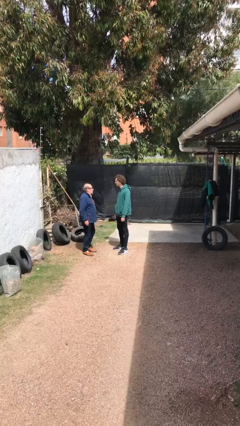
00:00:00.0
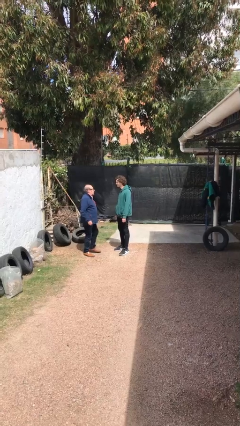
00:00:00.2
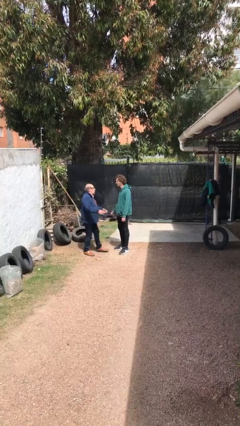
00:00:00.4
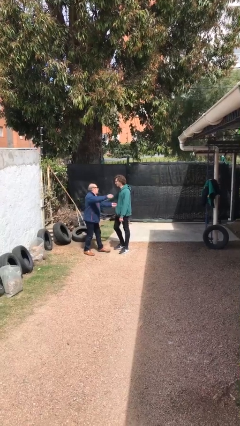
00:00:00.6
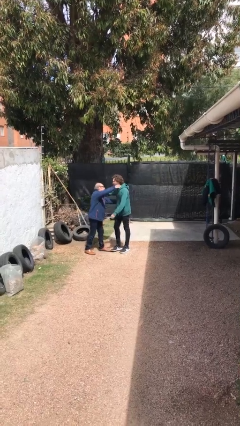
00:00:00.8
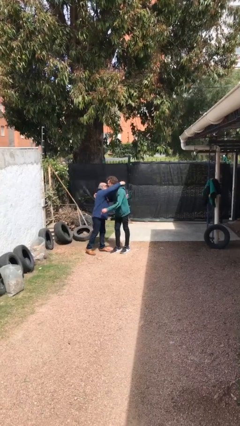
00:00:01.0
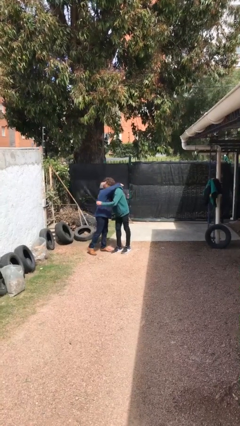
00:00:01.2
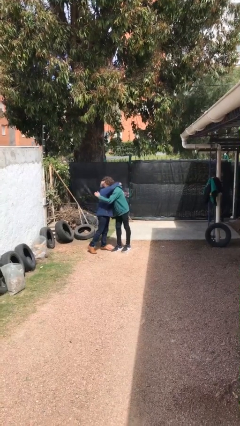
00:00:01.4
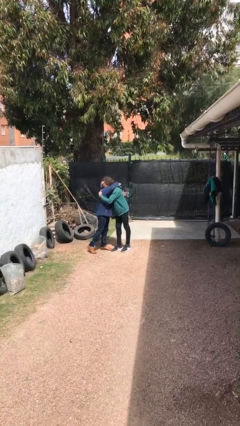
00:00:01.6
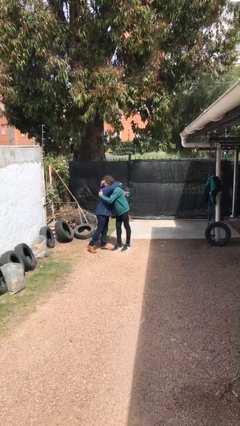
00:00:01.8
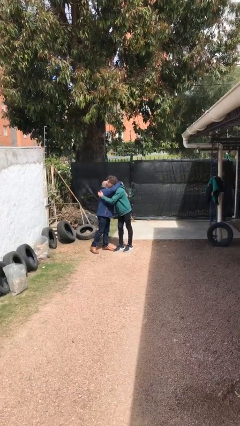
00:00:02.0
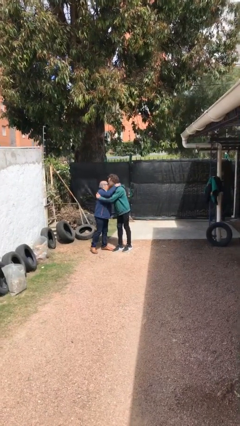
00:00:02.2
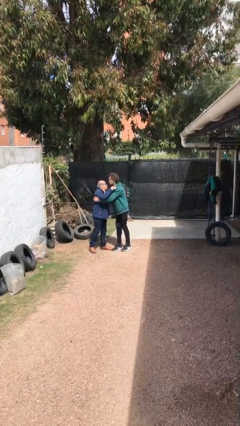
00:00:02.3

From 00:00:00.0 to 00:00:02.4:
person embraces person

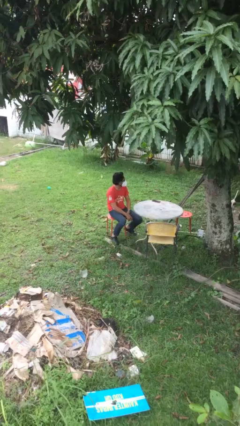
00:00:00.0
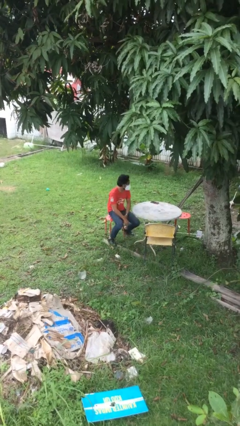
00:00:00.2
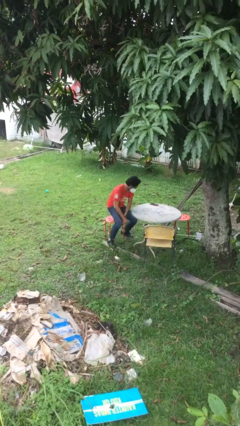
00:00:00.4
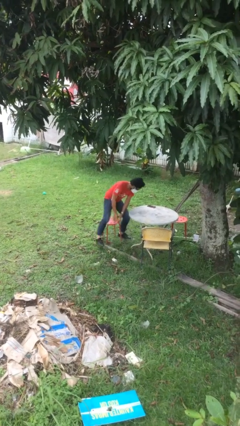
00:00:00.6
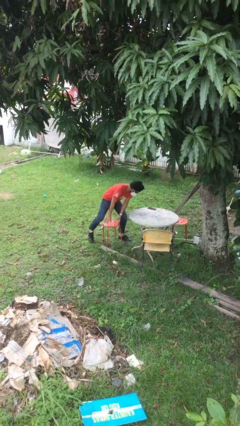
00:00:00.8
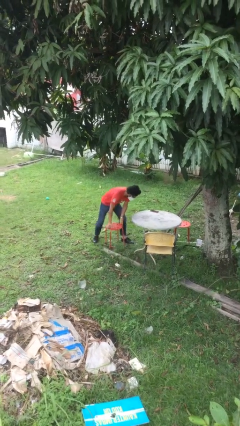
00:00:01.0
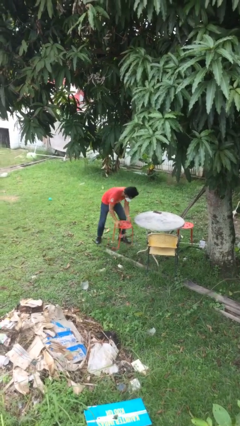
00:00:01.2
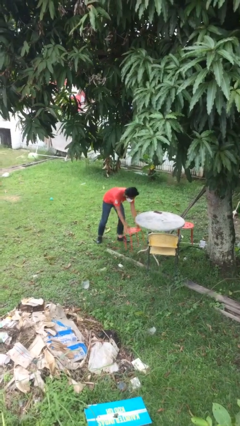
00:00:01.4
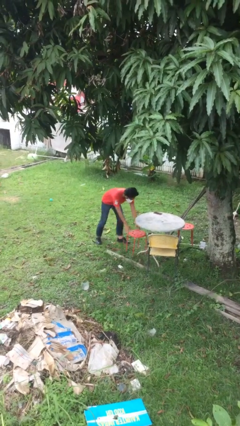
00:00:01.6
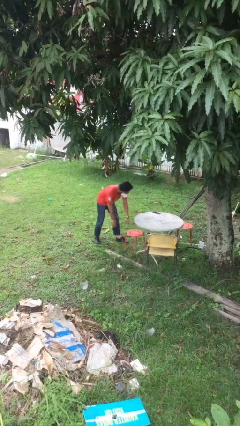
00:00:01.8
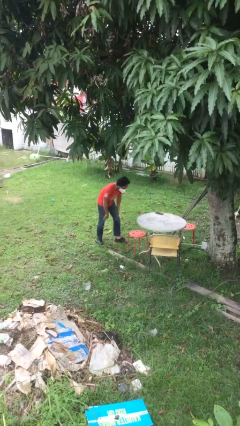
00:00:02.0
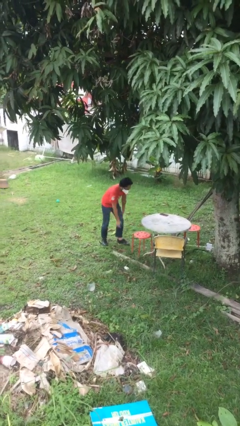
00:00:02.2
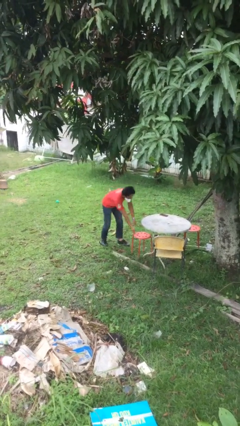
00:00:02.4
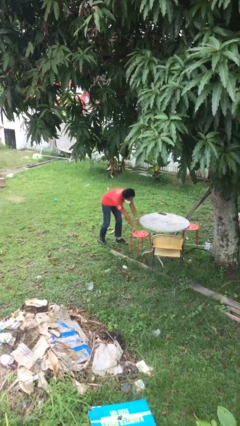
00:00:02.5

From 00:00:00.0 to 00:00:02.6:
person stands up

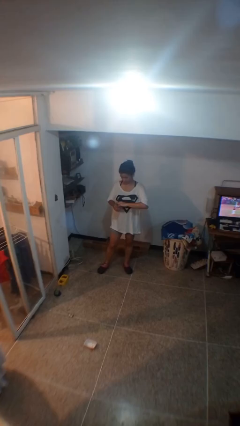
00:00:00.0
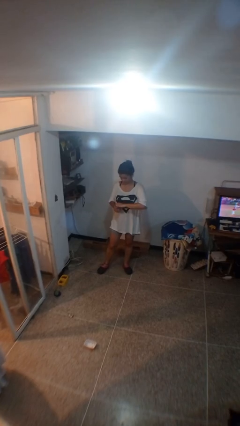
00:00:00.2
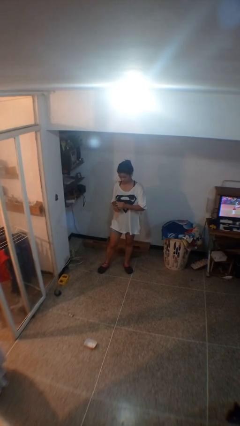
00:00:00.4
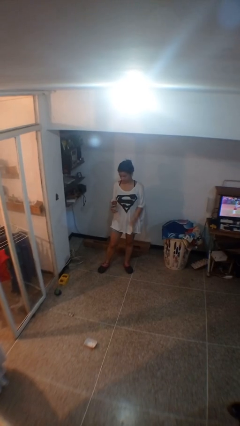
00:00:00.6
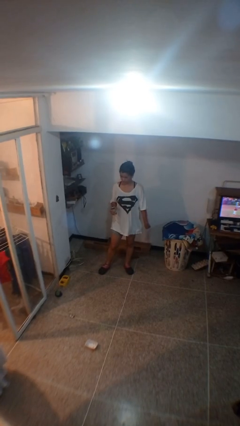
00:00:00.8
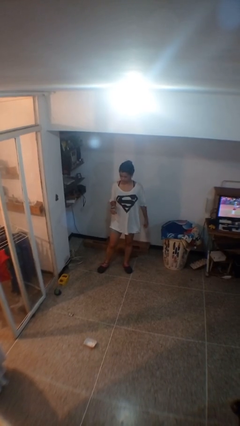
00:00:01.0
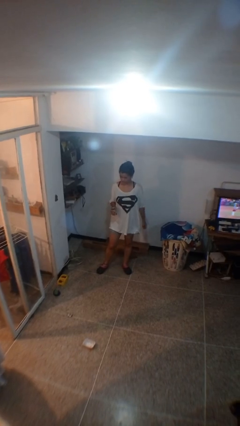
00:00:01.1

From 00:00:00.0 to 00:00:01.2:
person opens beverage can

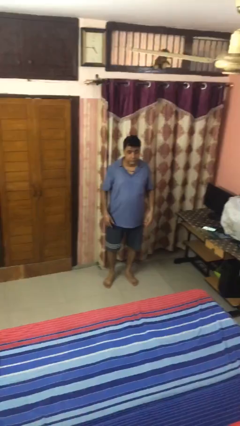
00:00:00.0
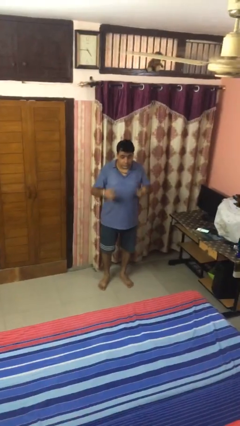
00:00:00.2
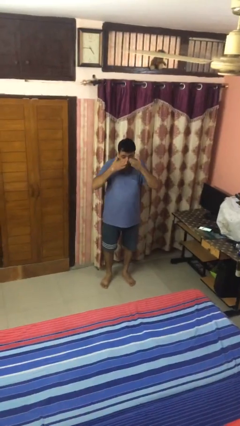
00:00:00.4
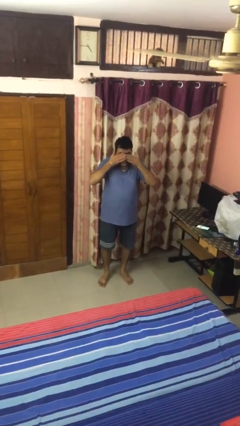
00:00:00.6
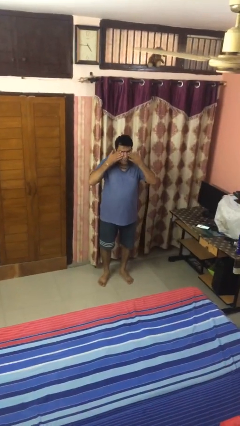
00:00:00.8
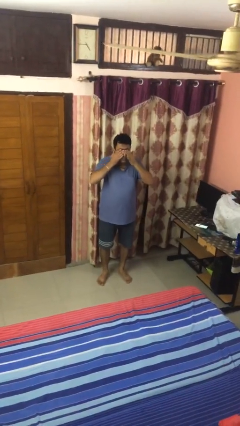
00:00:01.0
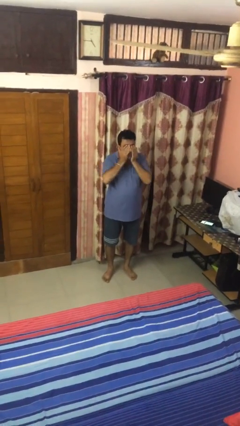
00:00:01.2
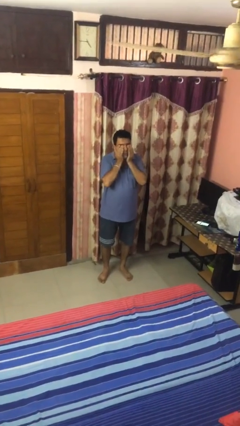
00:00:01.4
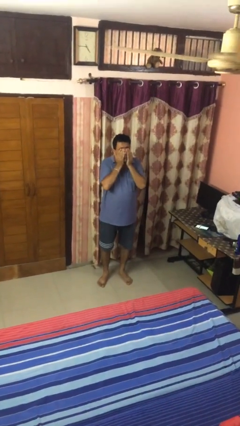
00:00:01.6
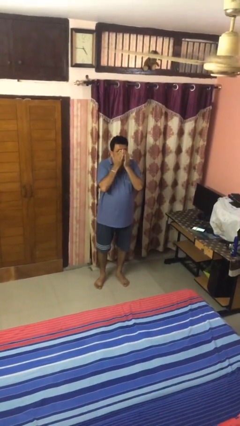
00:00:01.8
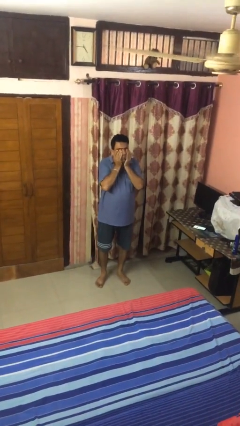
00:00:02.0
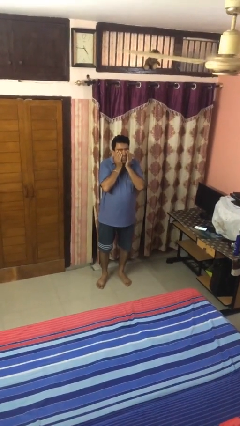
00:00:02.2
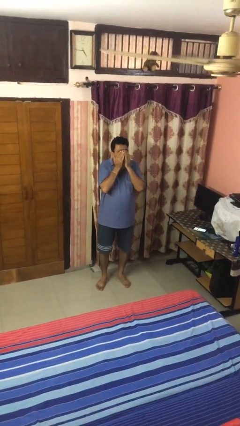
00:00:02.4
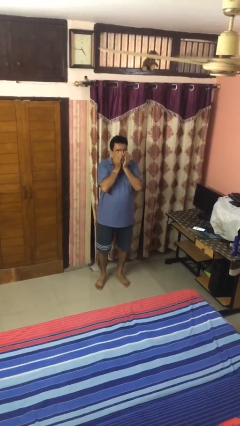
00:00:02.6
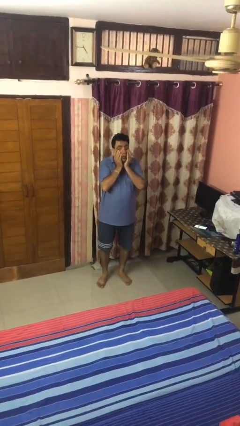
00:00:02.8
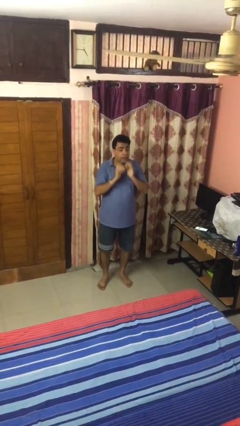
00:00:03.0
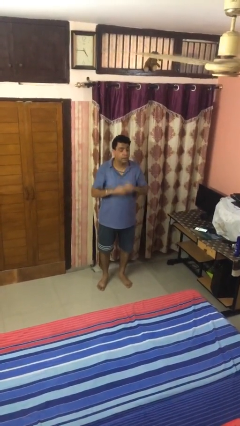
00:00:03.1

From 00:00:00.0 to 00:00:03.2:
person rubs eyes

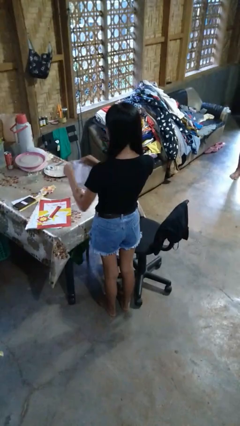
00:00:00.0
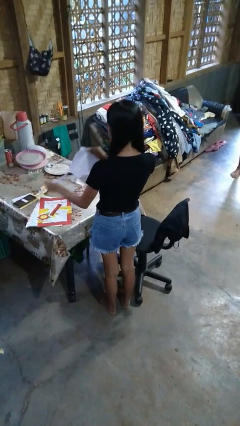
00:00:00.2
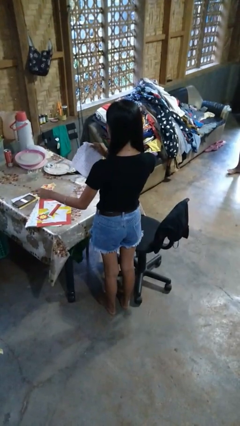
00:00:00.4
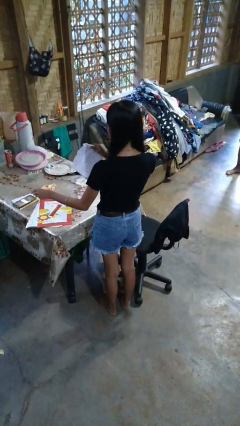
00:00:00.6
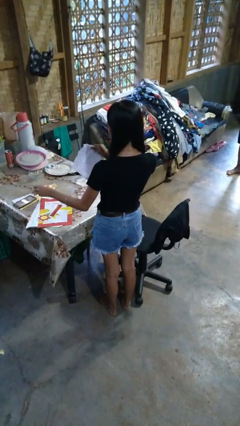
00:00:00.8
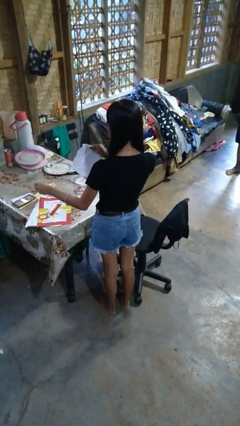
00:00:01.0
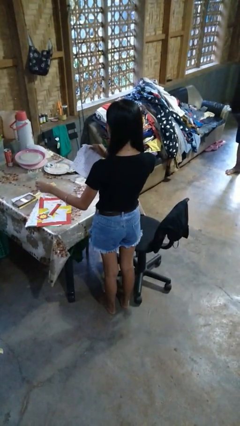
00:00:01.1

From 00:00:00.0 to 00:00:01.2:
person tears paper

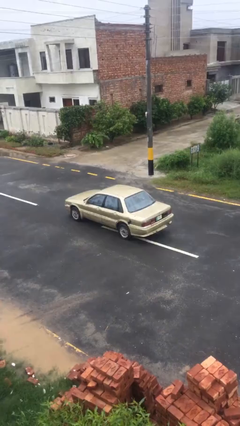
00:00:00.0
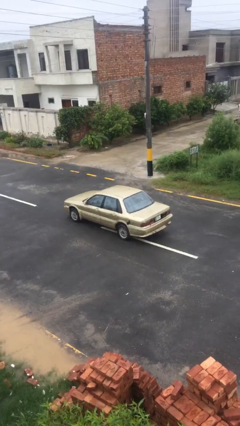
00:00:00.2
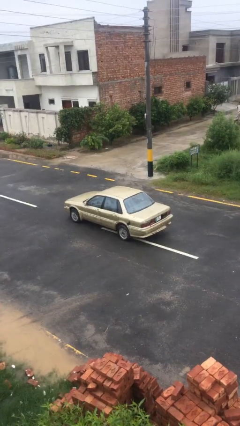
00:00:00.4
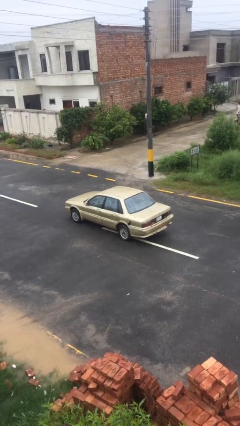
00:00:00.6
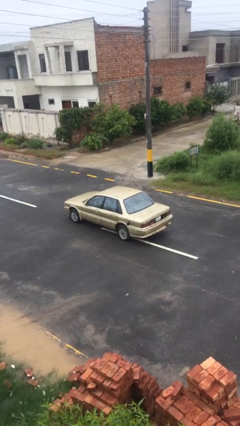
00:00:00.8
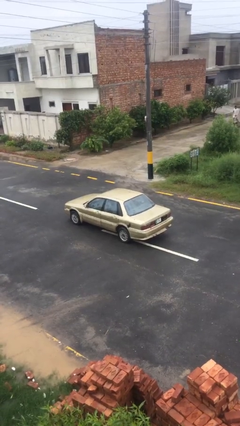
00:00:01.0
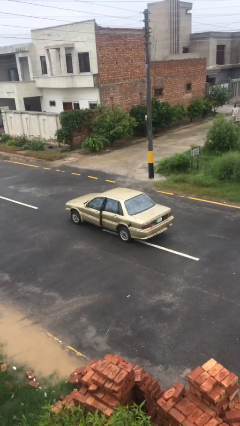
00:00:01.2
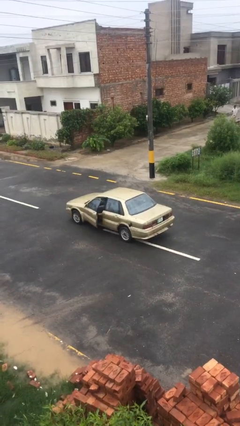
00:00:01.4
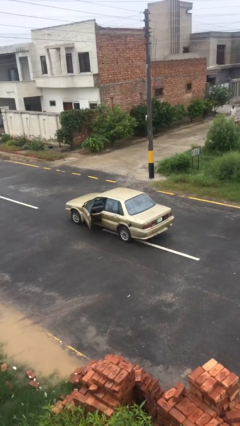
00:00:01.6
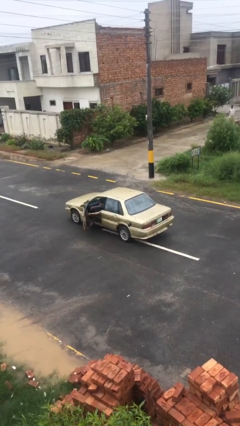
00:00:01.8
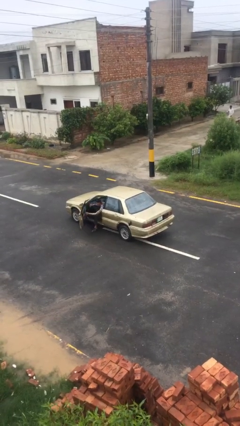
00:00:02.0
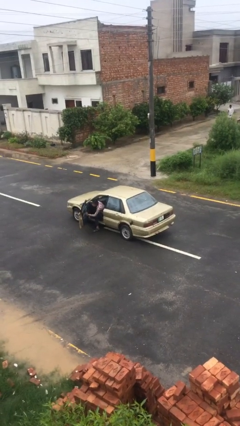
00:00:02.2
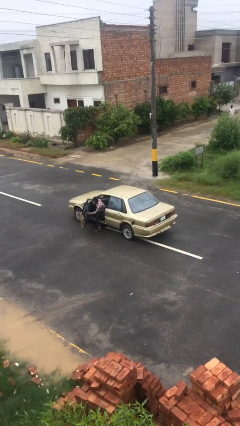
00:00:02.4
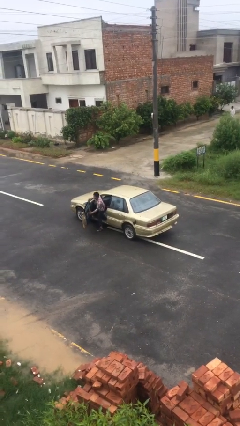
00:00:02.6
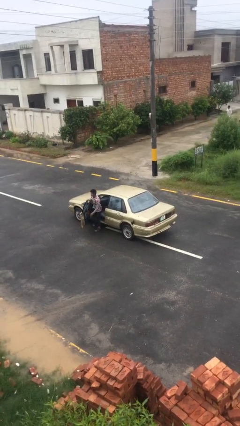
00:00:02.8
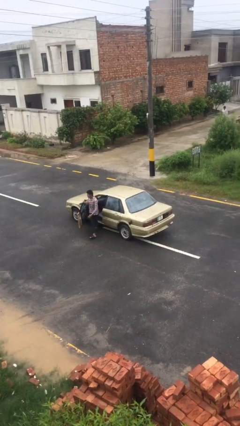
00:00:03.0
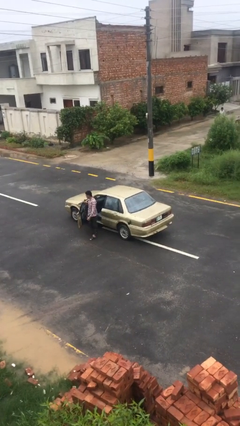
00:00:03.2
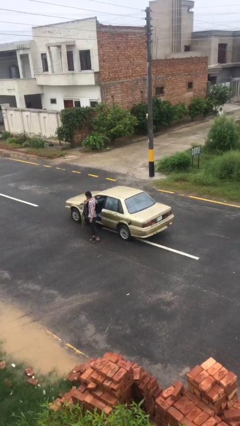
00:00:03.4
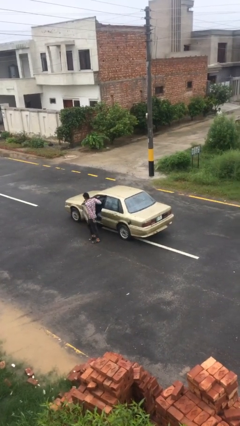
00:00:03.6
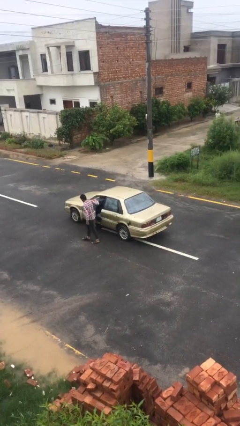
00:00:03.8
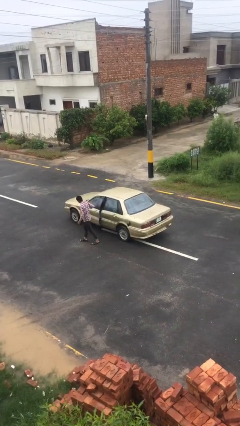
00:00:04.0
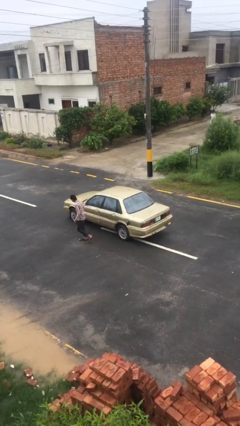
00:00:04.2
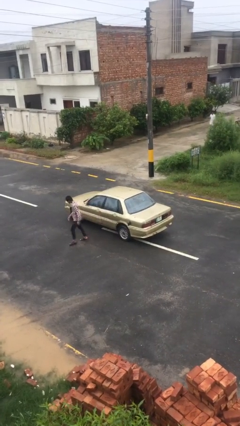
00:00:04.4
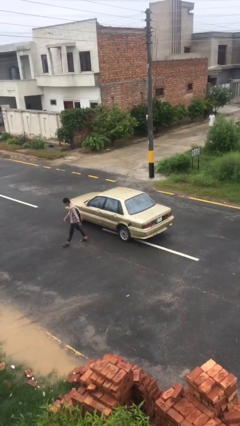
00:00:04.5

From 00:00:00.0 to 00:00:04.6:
car drops off person

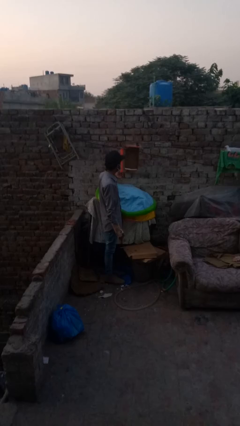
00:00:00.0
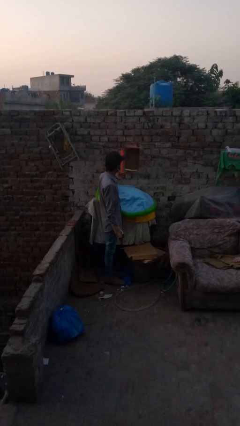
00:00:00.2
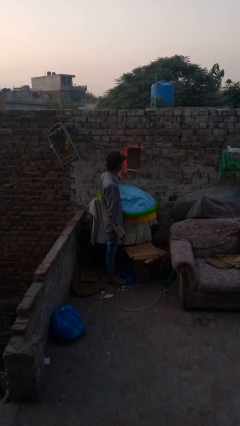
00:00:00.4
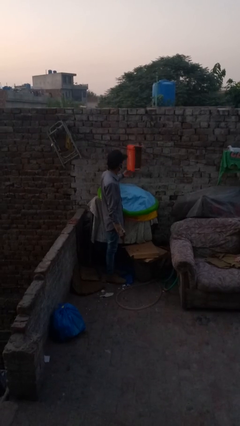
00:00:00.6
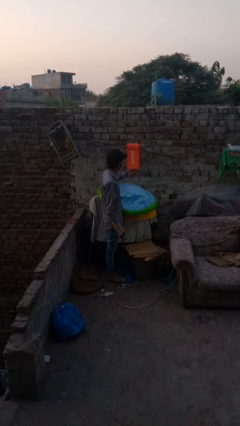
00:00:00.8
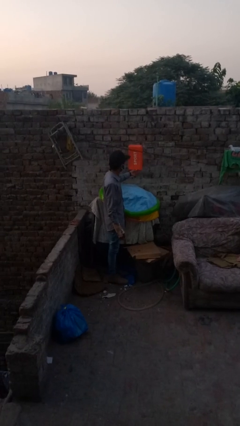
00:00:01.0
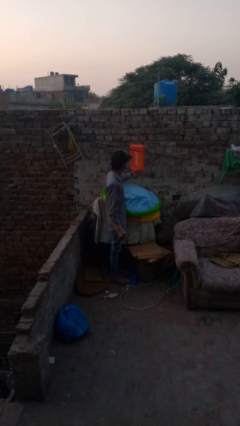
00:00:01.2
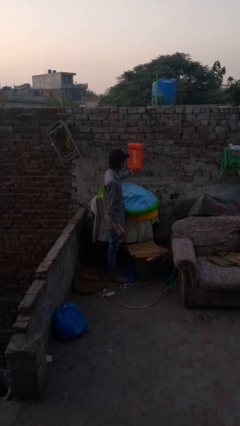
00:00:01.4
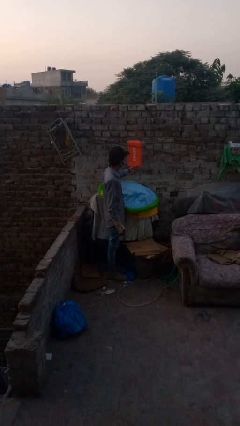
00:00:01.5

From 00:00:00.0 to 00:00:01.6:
person closes mailbox

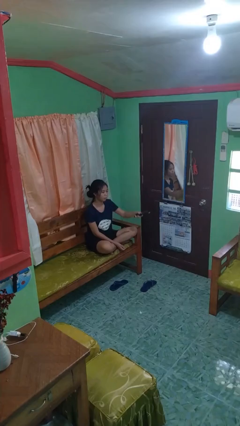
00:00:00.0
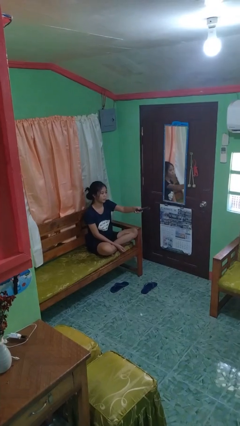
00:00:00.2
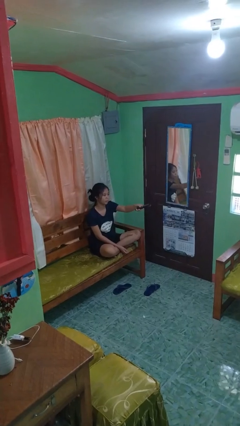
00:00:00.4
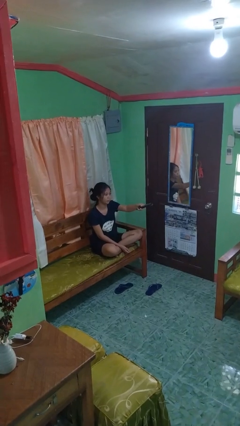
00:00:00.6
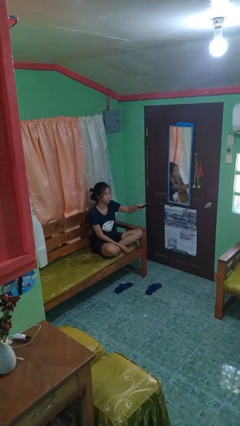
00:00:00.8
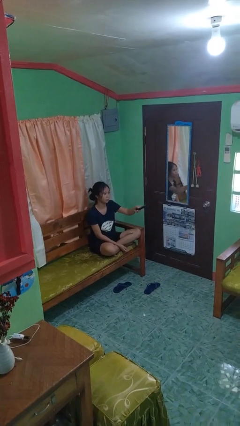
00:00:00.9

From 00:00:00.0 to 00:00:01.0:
person uses television remote
